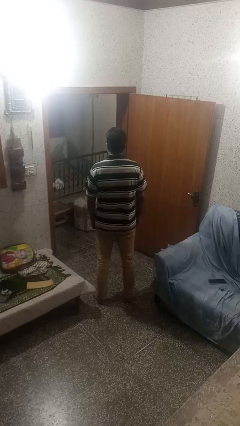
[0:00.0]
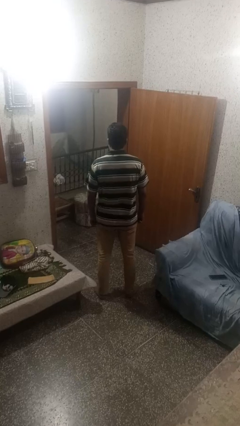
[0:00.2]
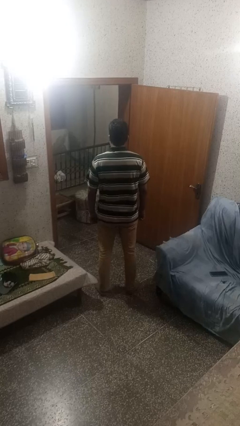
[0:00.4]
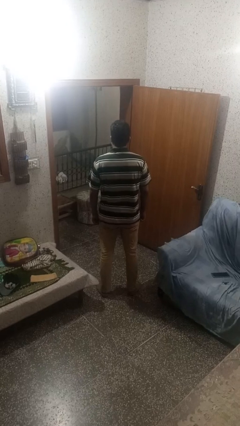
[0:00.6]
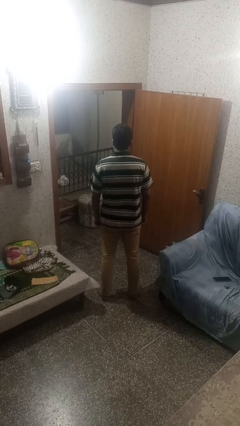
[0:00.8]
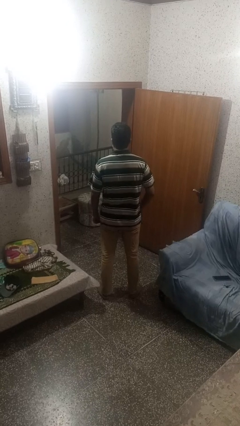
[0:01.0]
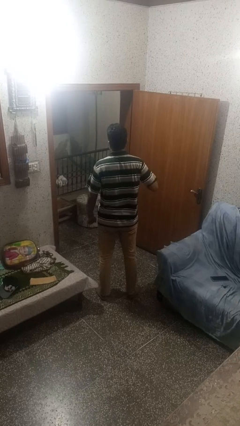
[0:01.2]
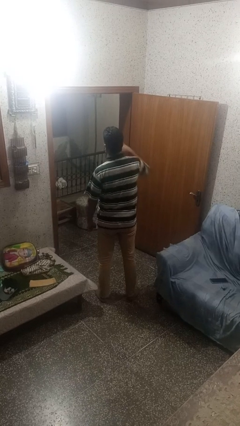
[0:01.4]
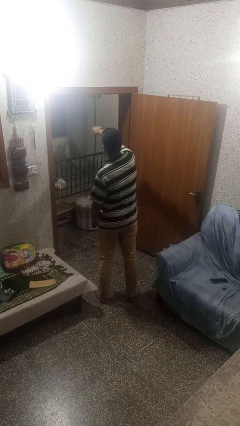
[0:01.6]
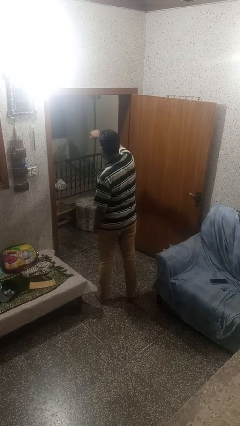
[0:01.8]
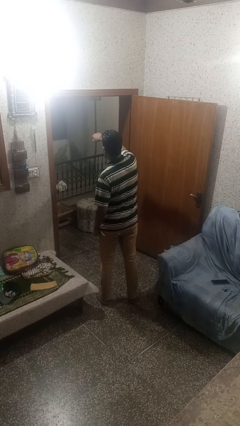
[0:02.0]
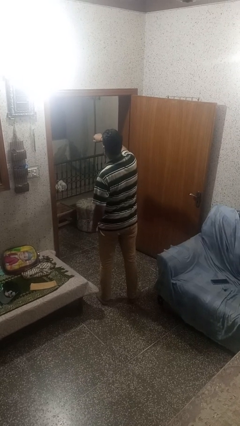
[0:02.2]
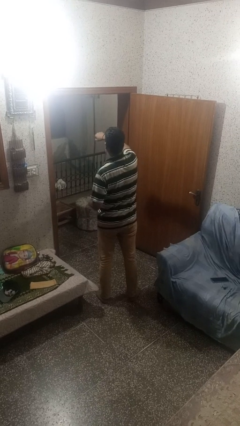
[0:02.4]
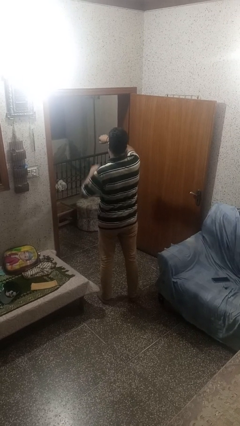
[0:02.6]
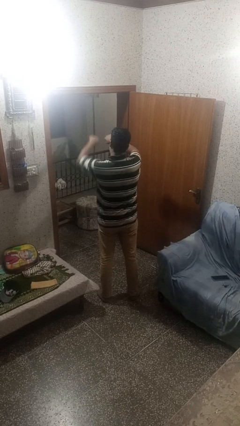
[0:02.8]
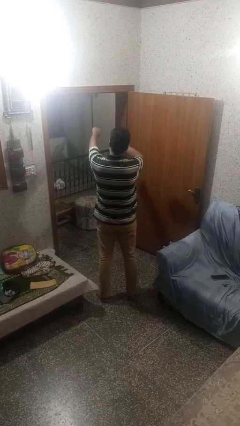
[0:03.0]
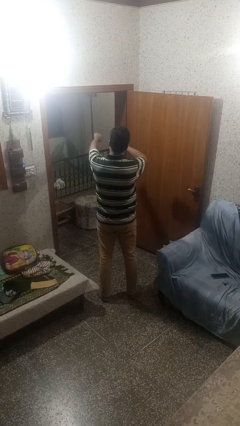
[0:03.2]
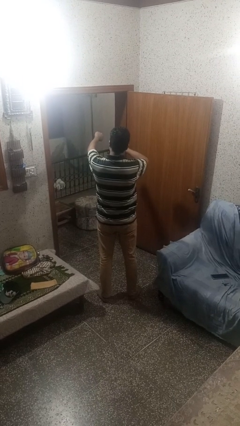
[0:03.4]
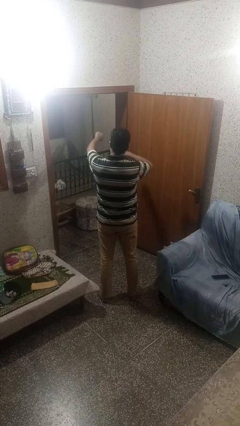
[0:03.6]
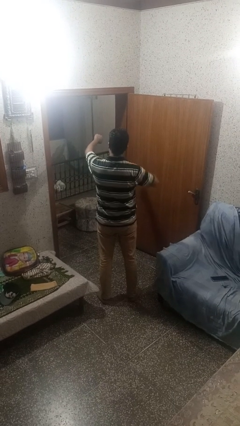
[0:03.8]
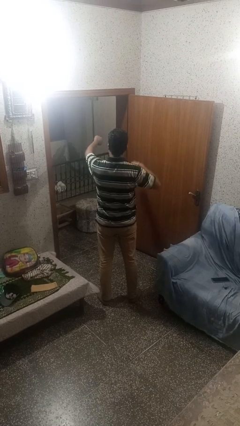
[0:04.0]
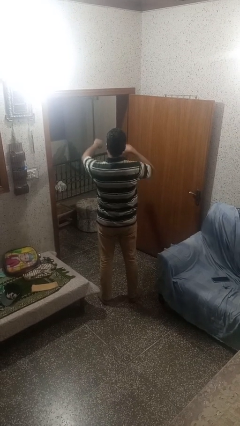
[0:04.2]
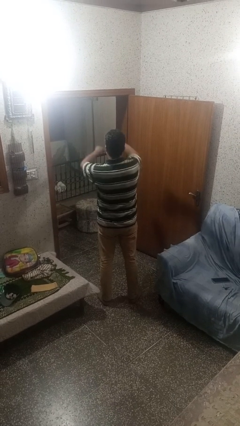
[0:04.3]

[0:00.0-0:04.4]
person punches

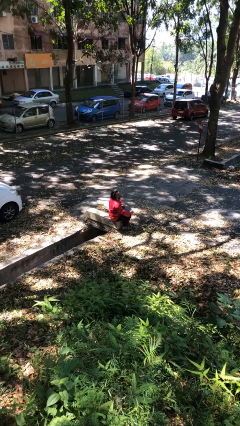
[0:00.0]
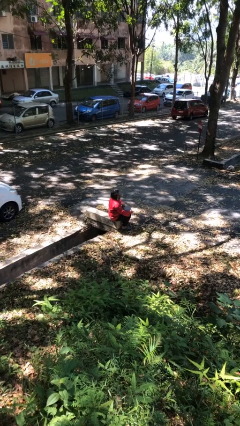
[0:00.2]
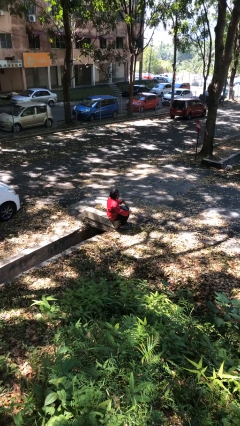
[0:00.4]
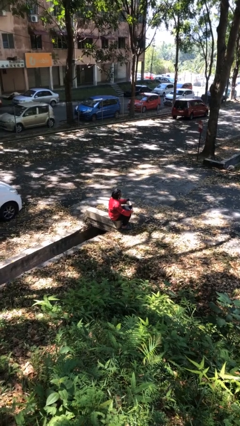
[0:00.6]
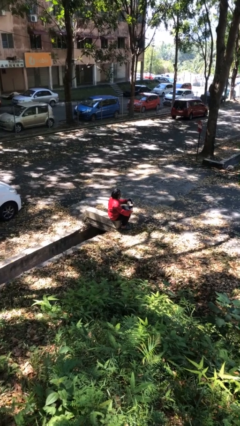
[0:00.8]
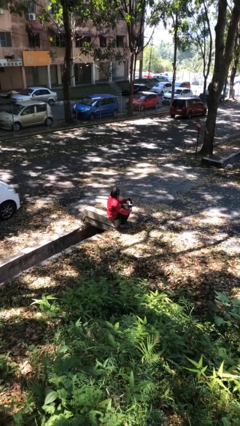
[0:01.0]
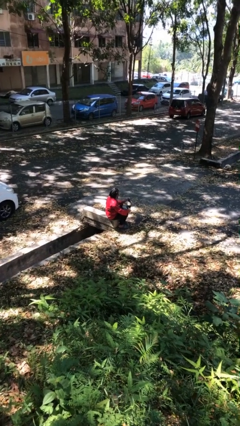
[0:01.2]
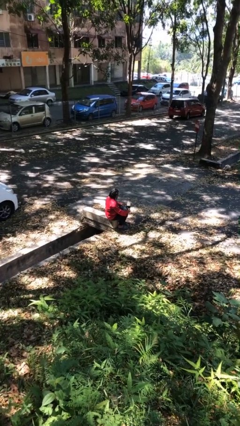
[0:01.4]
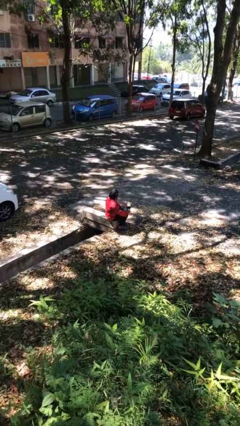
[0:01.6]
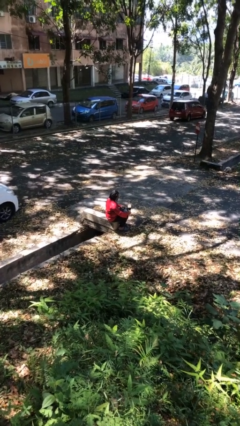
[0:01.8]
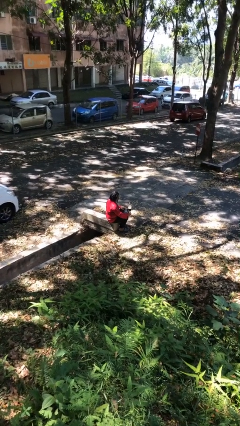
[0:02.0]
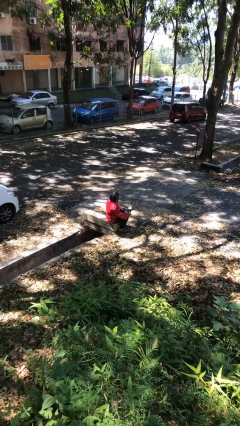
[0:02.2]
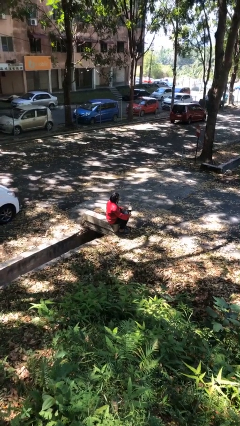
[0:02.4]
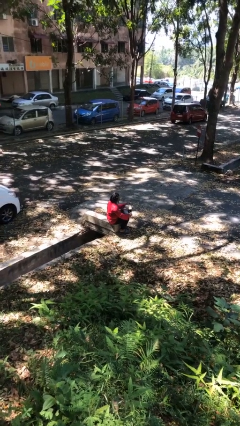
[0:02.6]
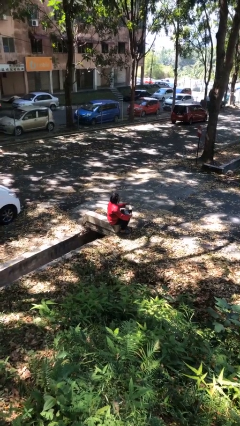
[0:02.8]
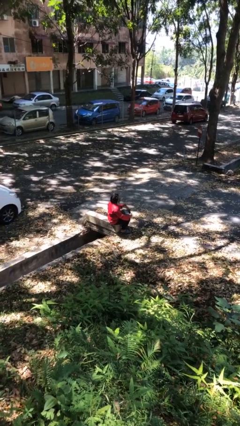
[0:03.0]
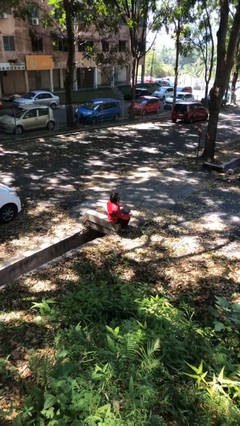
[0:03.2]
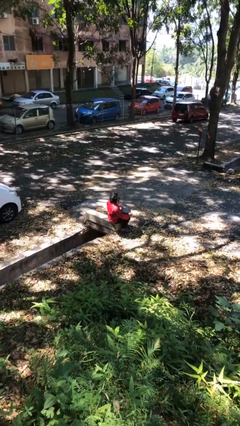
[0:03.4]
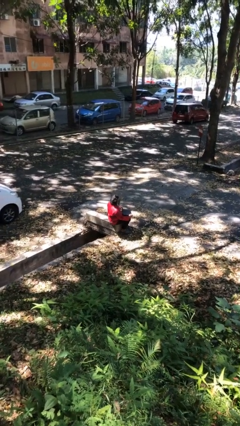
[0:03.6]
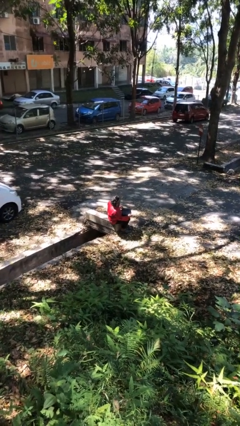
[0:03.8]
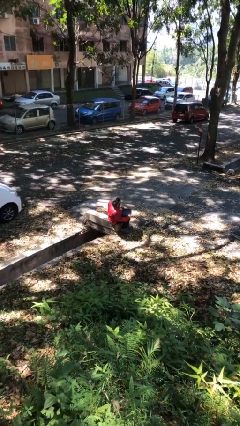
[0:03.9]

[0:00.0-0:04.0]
person interacts with laptop

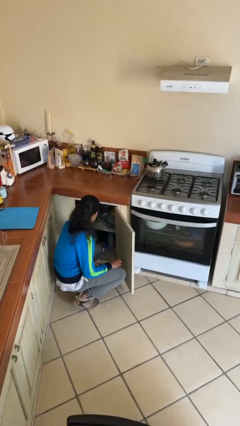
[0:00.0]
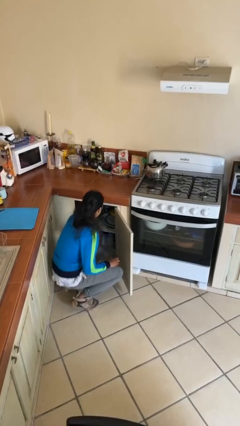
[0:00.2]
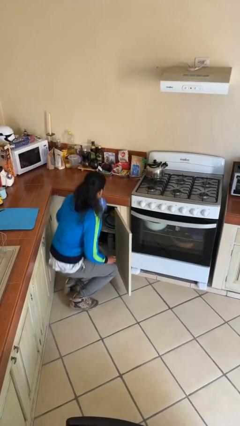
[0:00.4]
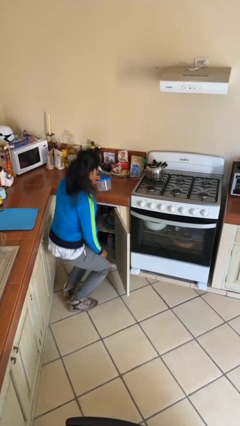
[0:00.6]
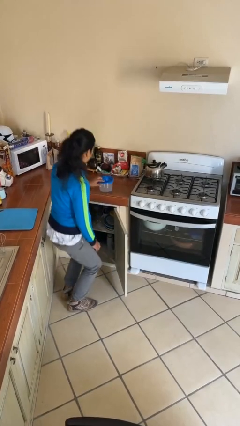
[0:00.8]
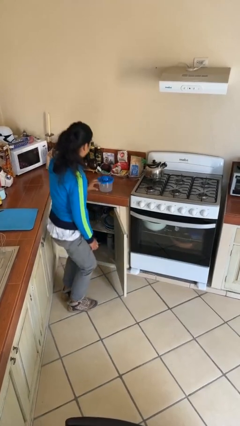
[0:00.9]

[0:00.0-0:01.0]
person takes object from cabinet

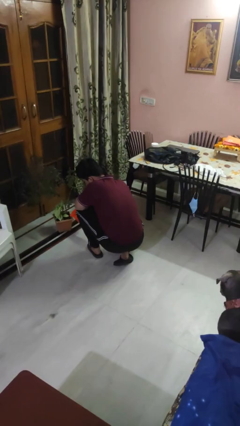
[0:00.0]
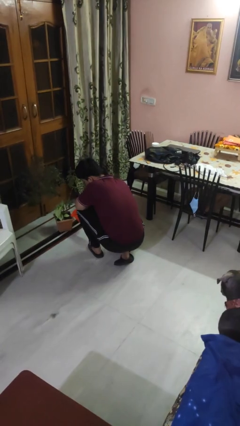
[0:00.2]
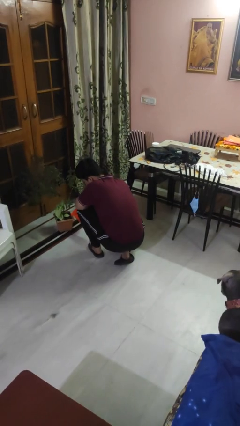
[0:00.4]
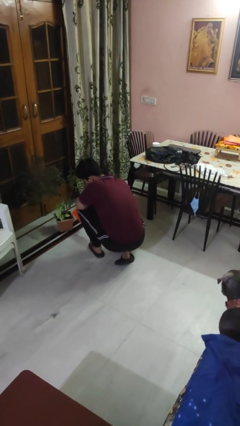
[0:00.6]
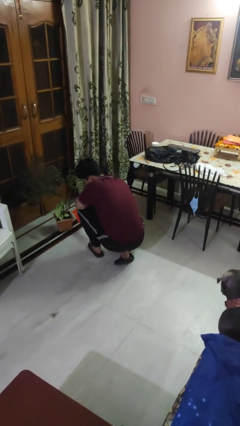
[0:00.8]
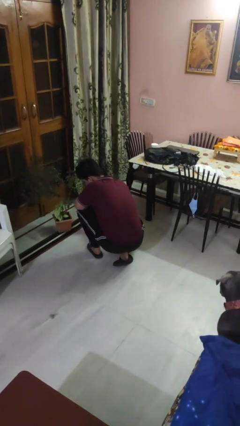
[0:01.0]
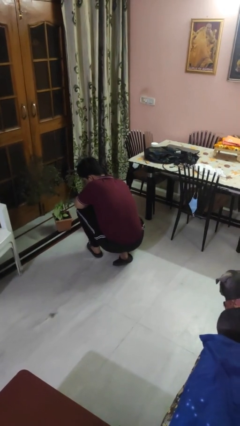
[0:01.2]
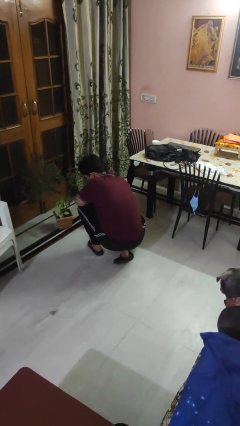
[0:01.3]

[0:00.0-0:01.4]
person waters houseplant

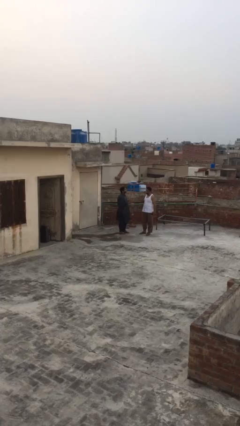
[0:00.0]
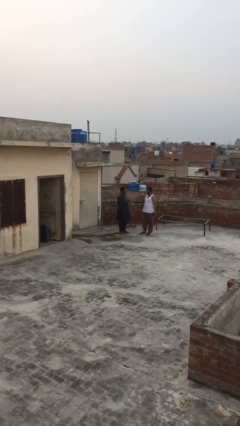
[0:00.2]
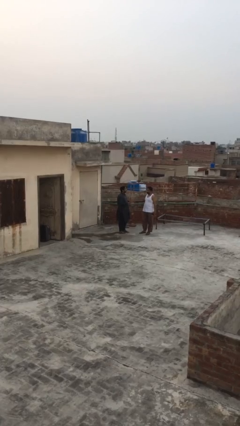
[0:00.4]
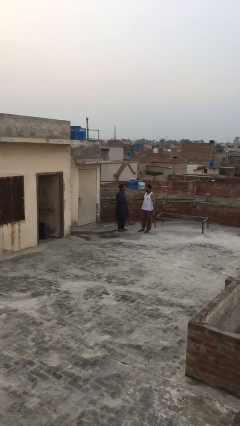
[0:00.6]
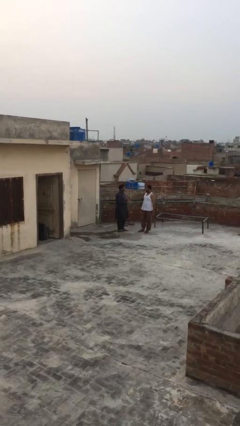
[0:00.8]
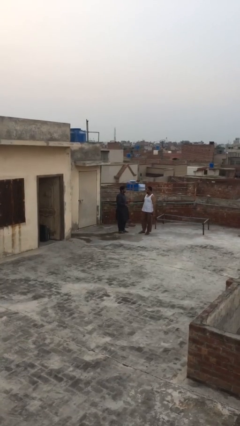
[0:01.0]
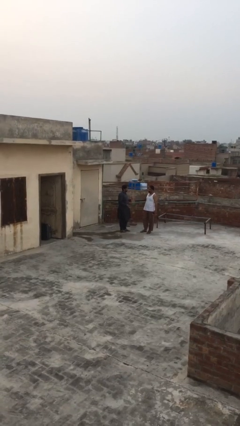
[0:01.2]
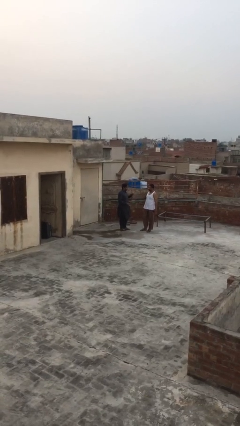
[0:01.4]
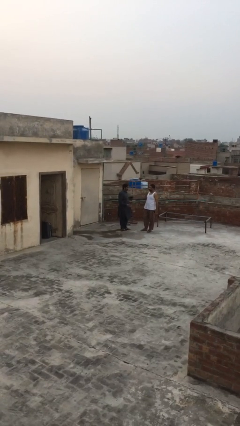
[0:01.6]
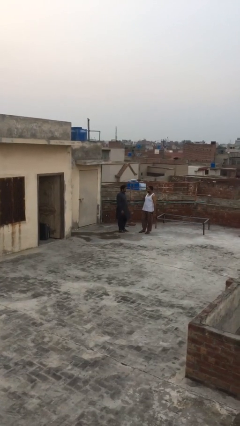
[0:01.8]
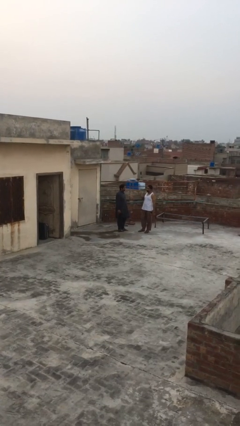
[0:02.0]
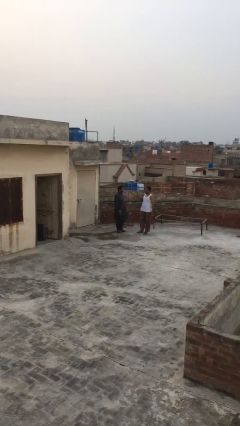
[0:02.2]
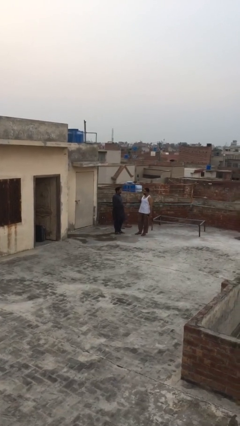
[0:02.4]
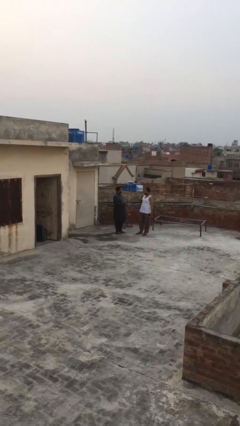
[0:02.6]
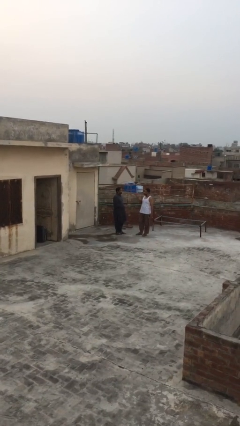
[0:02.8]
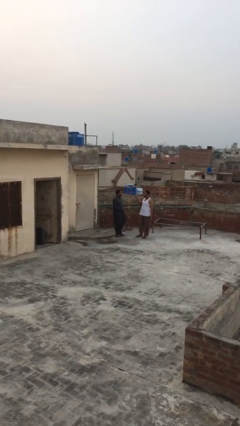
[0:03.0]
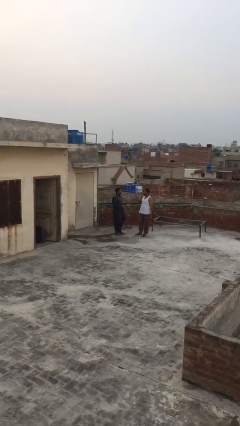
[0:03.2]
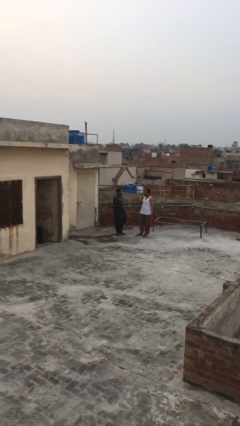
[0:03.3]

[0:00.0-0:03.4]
person talks to person

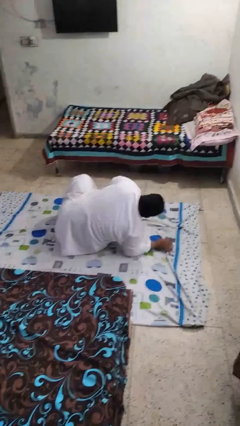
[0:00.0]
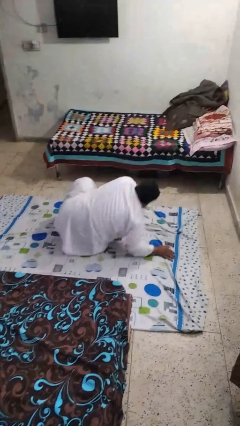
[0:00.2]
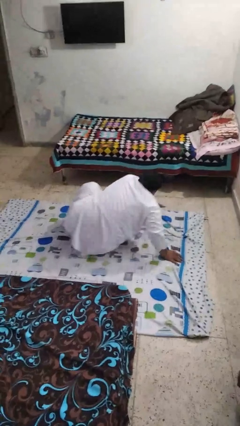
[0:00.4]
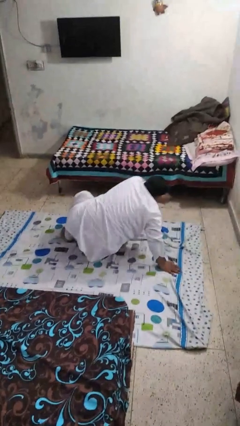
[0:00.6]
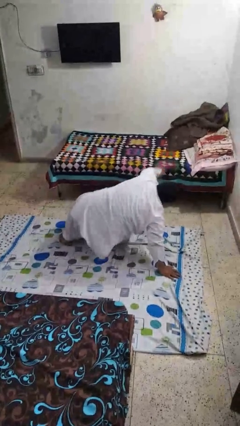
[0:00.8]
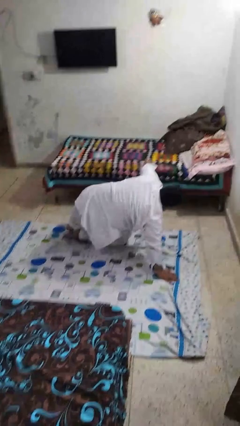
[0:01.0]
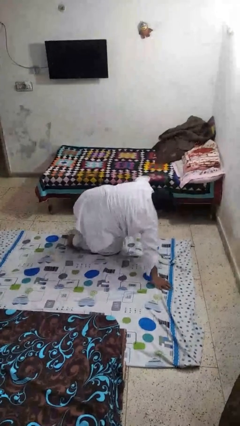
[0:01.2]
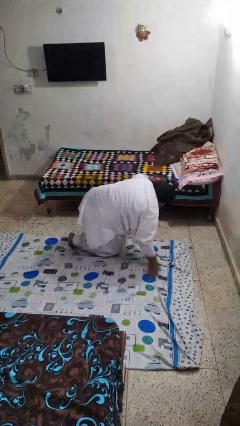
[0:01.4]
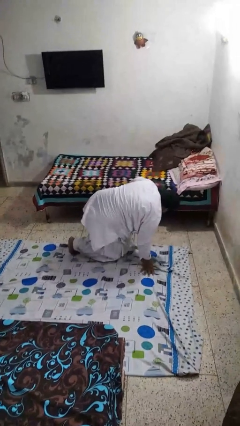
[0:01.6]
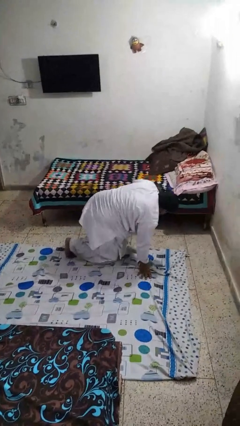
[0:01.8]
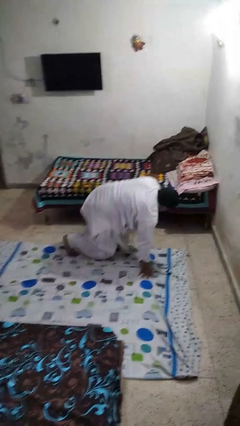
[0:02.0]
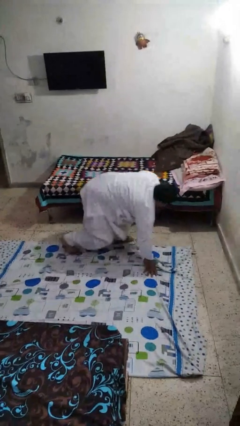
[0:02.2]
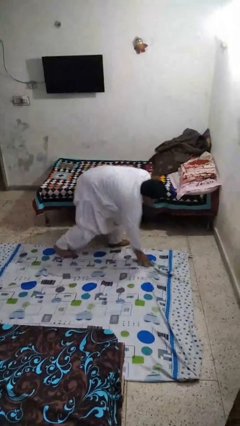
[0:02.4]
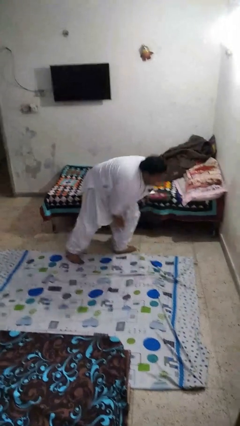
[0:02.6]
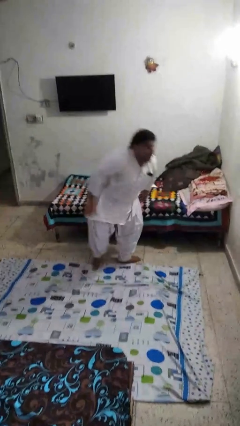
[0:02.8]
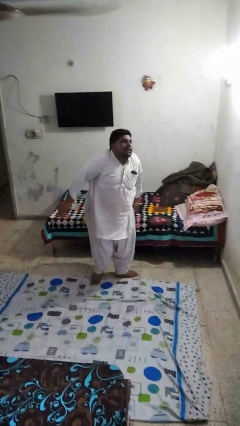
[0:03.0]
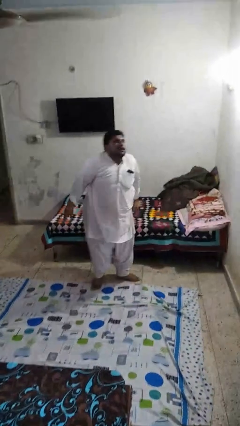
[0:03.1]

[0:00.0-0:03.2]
person stands up from floor

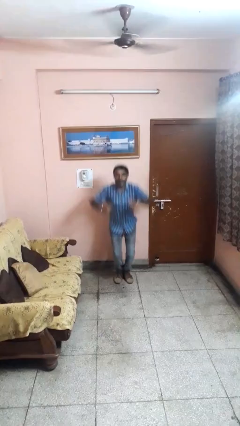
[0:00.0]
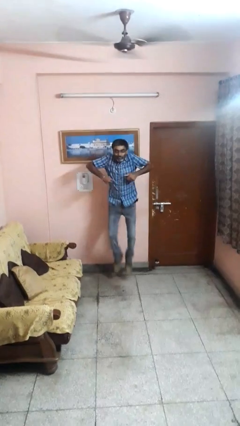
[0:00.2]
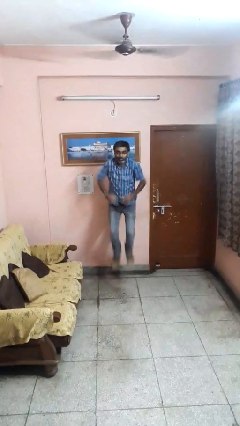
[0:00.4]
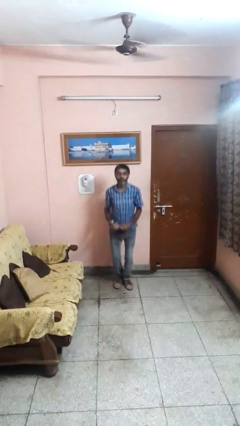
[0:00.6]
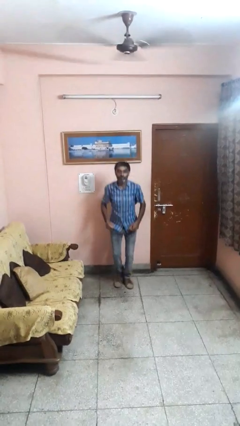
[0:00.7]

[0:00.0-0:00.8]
person jumps
